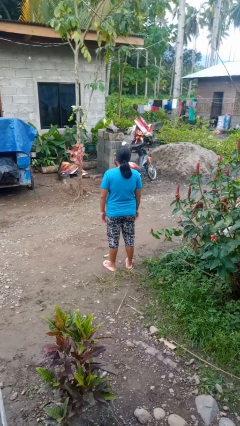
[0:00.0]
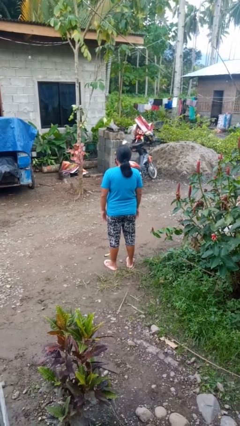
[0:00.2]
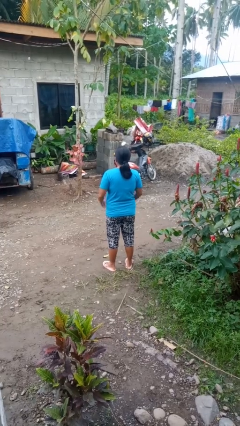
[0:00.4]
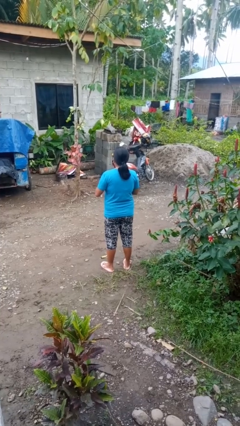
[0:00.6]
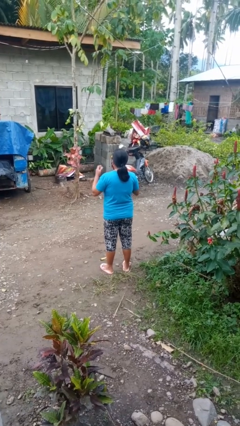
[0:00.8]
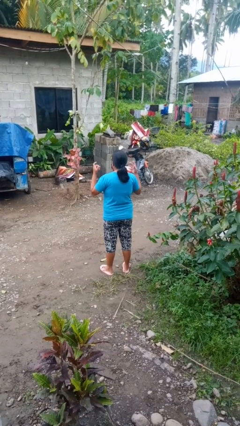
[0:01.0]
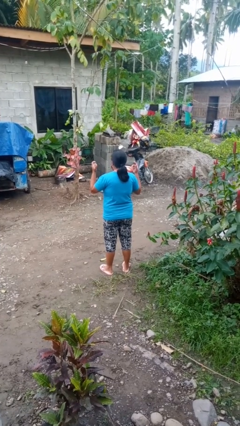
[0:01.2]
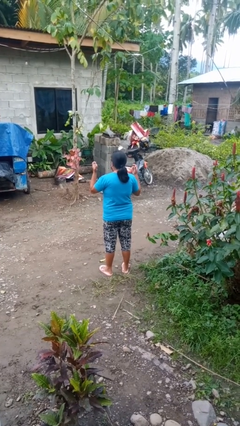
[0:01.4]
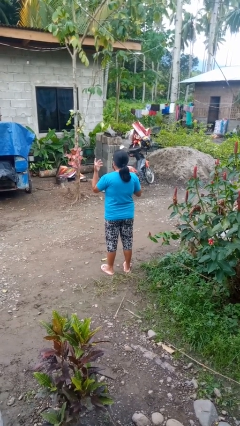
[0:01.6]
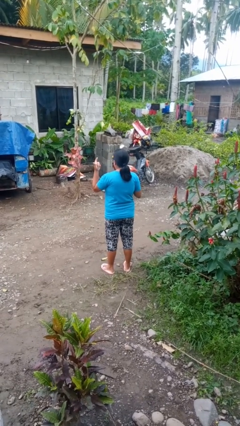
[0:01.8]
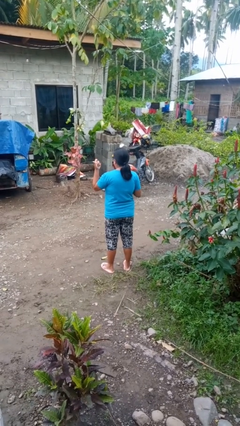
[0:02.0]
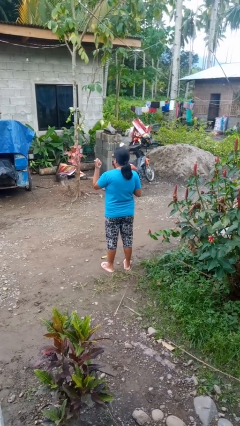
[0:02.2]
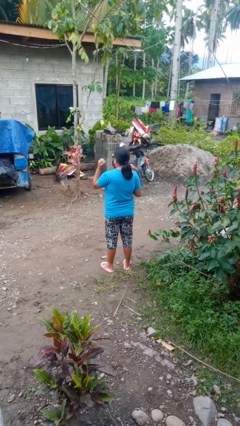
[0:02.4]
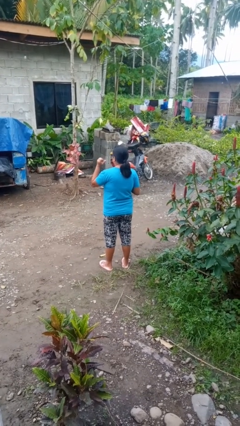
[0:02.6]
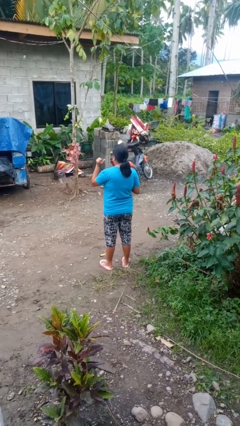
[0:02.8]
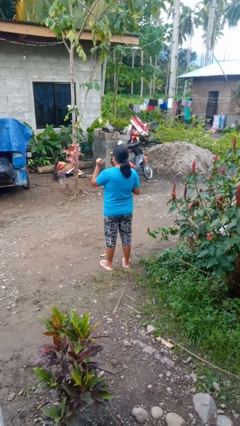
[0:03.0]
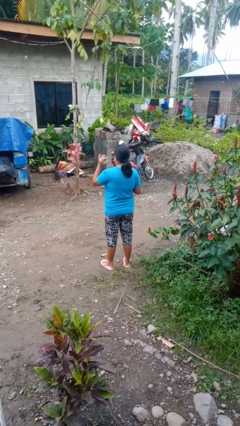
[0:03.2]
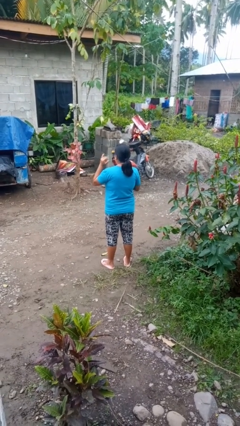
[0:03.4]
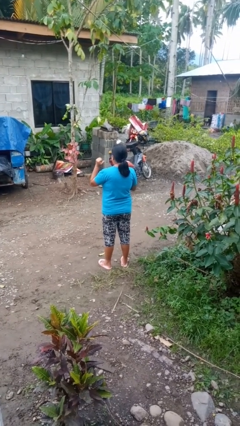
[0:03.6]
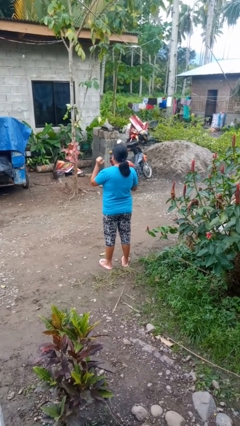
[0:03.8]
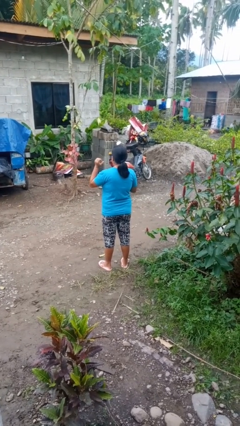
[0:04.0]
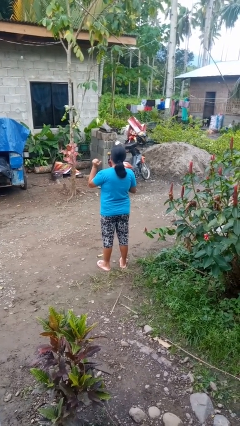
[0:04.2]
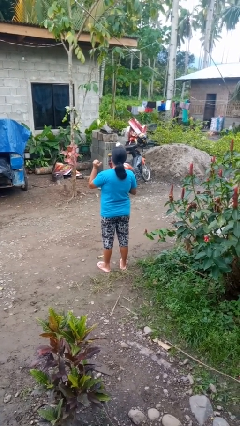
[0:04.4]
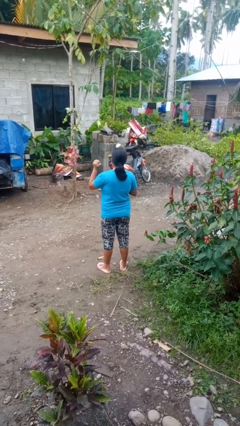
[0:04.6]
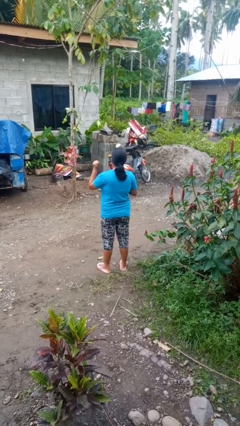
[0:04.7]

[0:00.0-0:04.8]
person cracks knuckles

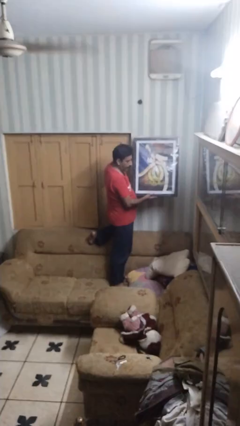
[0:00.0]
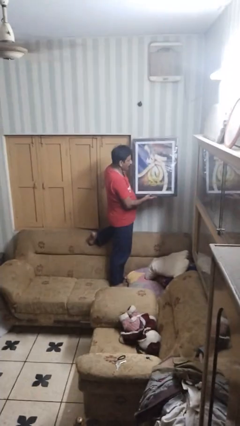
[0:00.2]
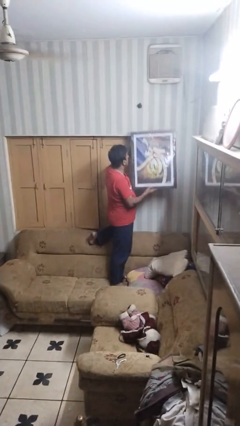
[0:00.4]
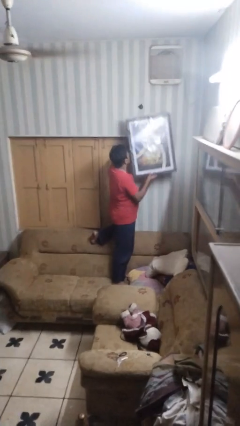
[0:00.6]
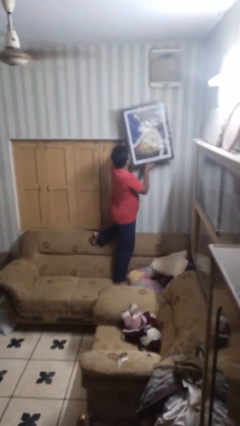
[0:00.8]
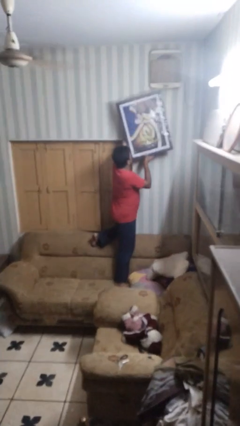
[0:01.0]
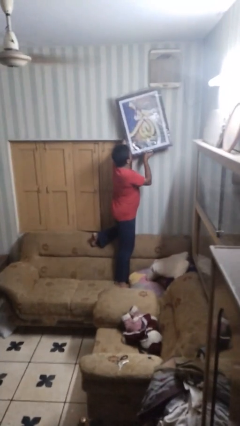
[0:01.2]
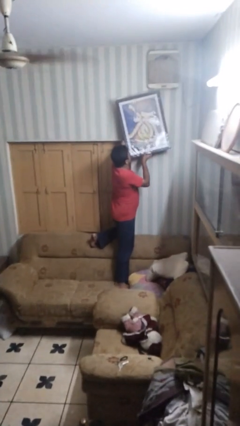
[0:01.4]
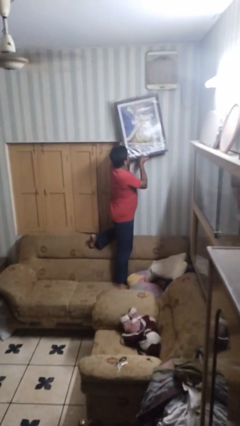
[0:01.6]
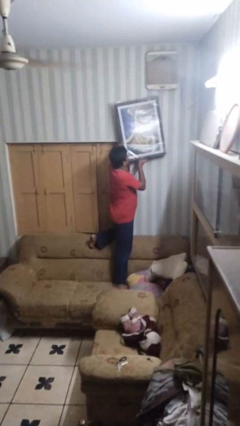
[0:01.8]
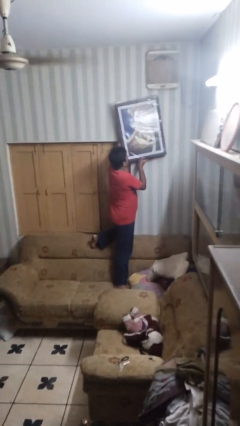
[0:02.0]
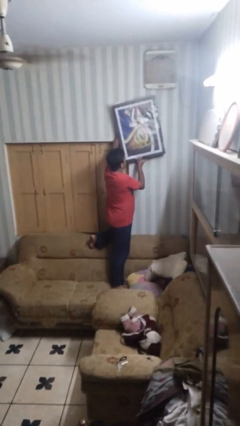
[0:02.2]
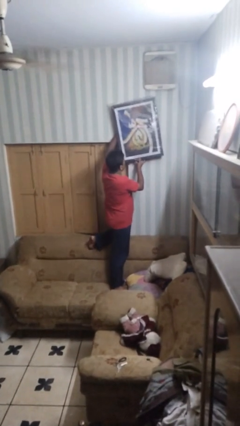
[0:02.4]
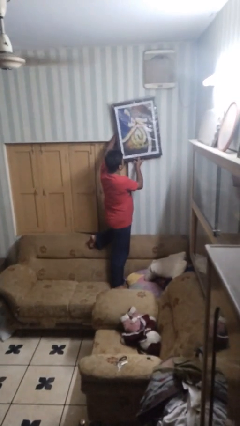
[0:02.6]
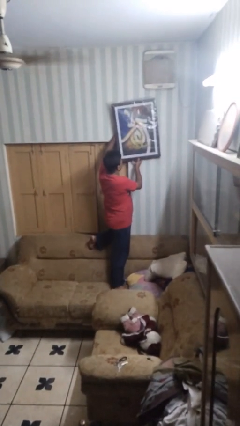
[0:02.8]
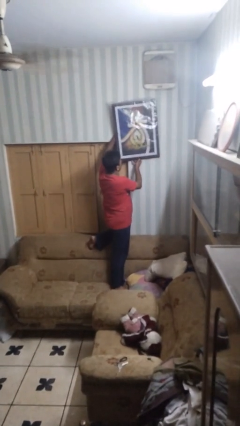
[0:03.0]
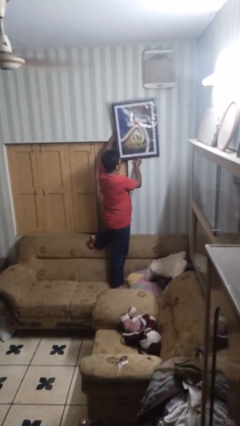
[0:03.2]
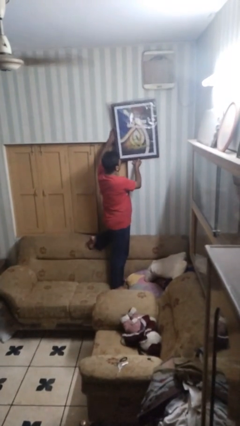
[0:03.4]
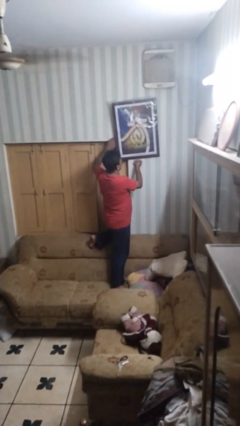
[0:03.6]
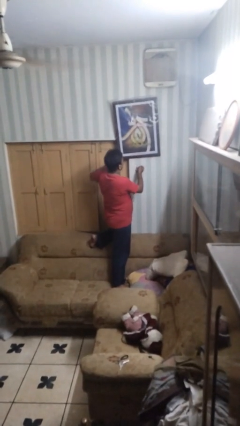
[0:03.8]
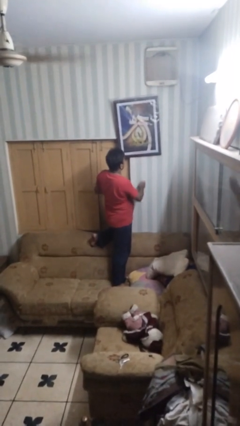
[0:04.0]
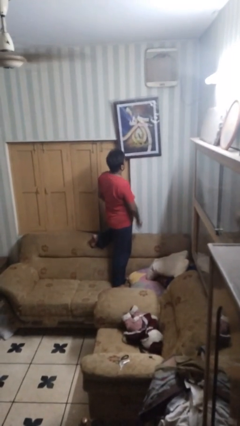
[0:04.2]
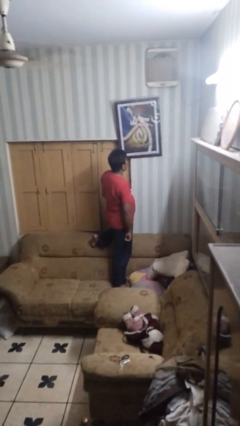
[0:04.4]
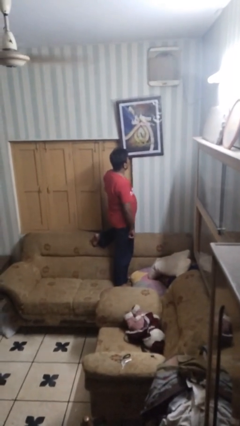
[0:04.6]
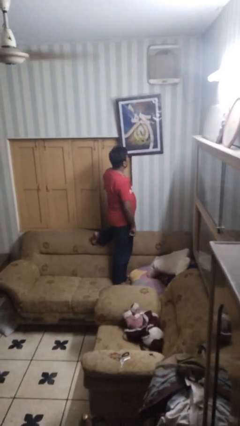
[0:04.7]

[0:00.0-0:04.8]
person puts up picture frame

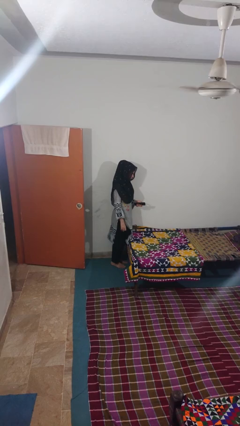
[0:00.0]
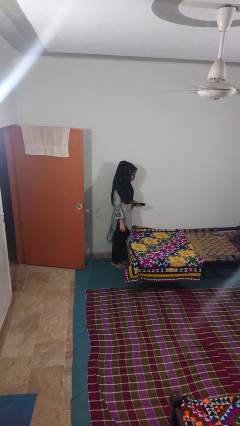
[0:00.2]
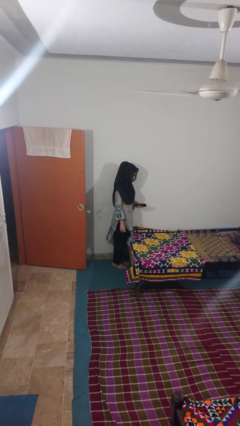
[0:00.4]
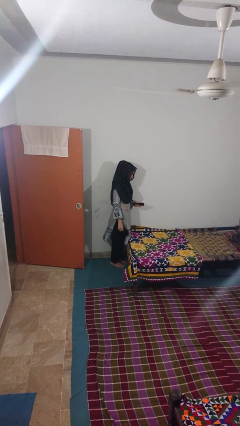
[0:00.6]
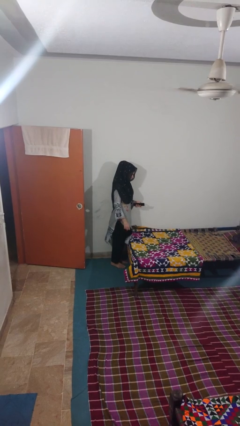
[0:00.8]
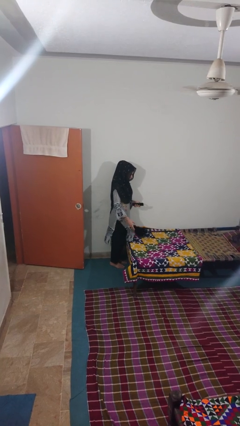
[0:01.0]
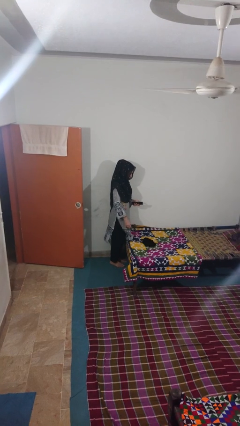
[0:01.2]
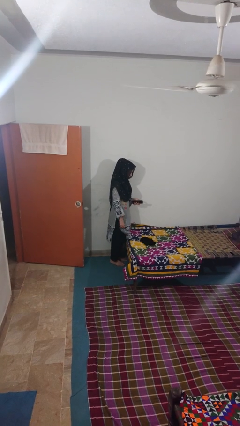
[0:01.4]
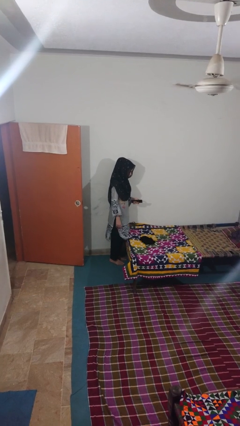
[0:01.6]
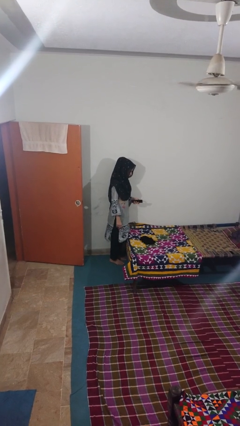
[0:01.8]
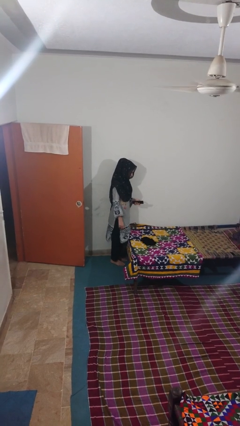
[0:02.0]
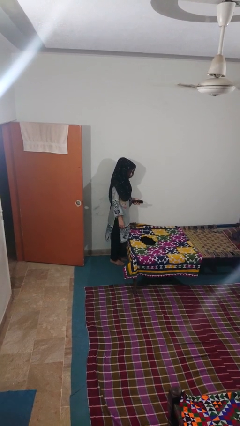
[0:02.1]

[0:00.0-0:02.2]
person throws object on bed

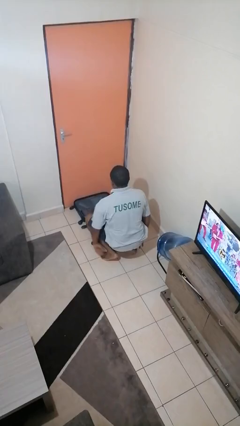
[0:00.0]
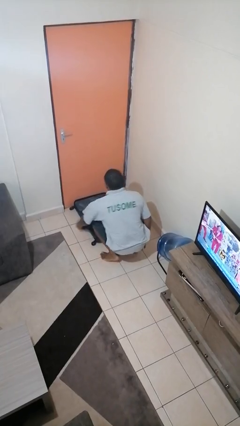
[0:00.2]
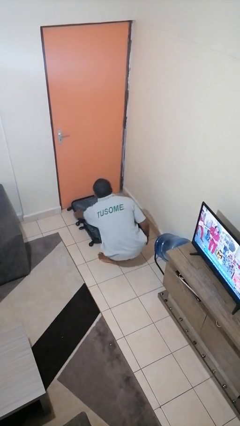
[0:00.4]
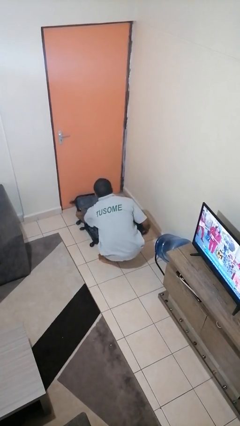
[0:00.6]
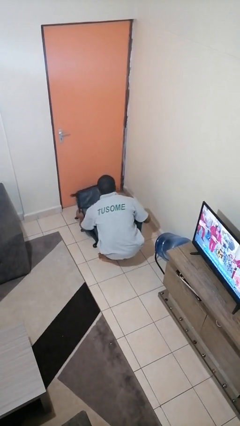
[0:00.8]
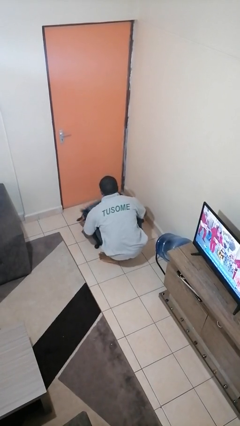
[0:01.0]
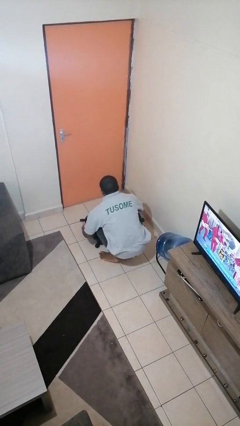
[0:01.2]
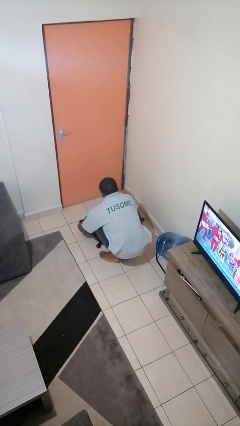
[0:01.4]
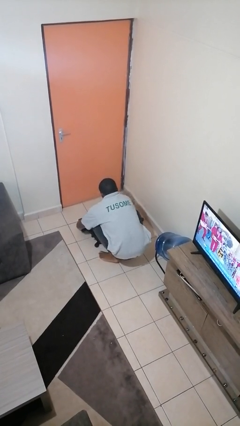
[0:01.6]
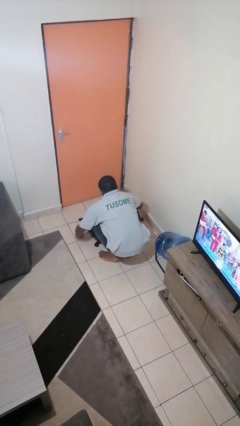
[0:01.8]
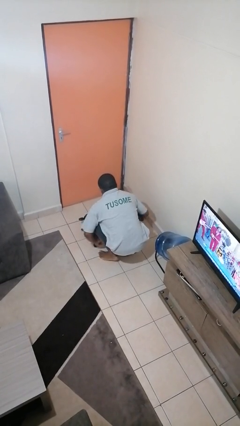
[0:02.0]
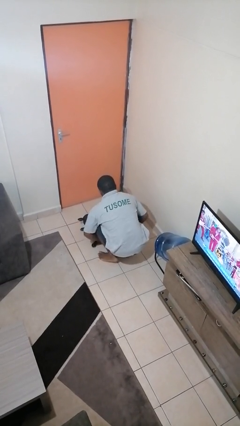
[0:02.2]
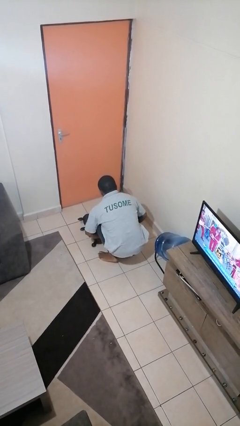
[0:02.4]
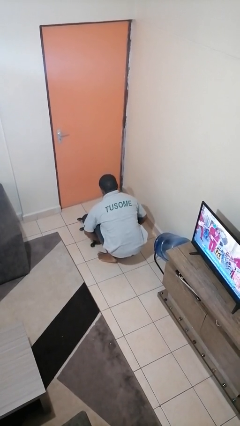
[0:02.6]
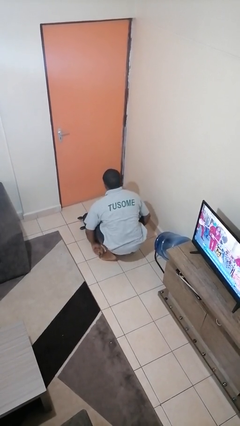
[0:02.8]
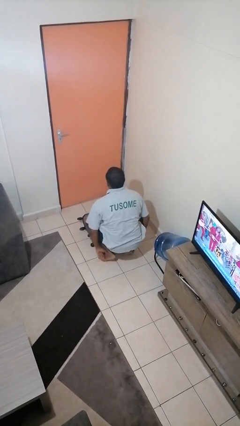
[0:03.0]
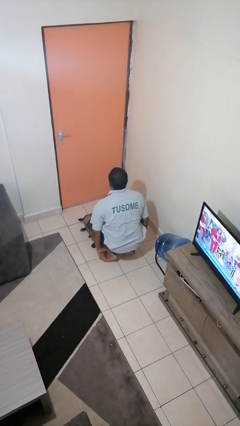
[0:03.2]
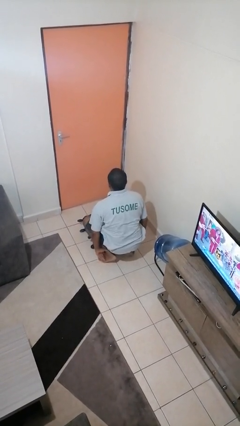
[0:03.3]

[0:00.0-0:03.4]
person closes suitcase

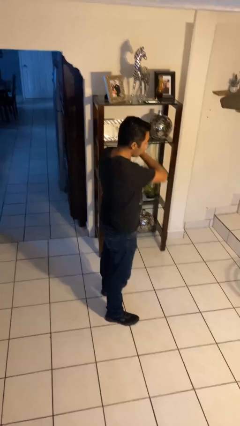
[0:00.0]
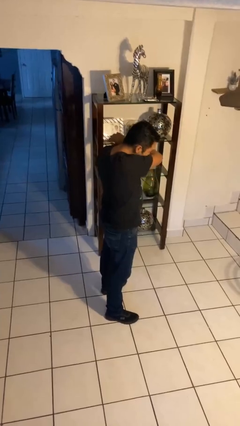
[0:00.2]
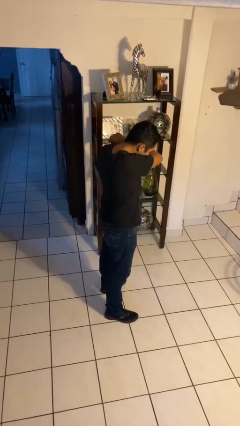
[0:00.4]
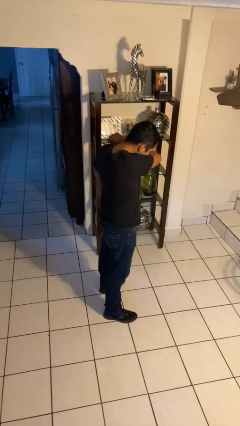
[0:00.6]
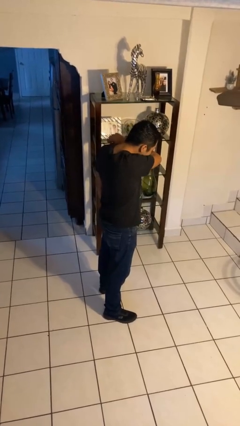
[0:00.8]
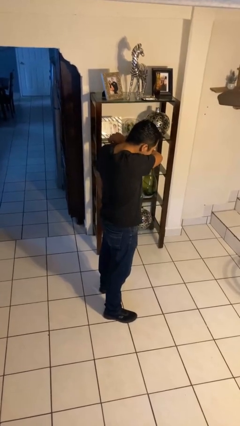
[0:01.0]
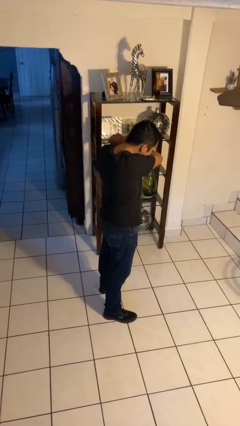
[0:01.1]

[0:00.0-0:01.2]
person sneezes into arm

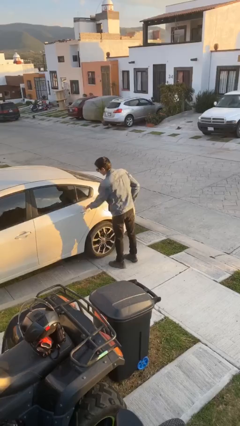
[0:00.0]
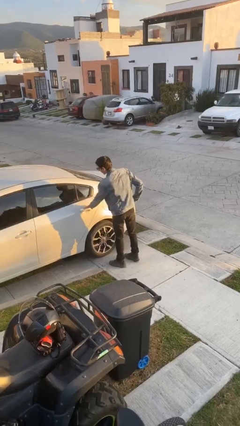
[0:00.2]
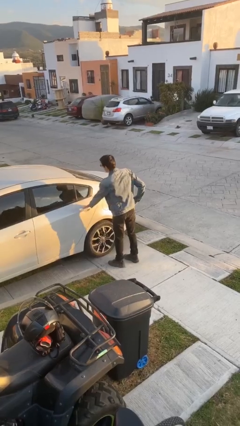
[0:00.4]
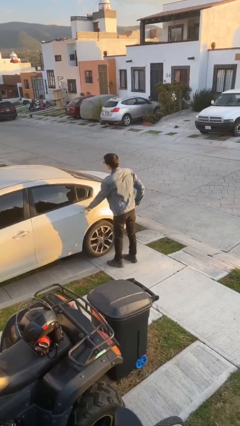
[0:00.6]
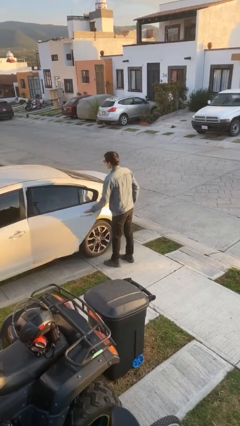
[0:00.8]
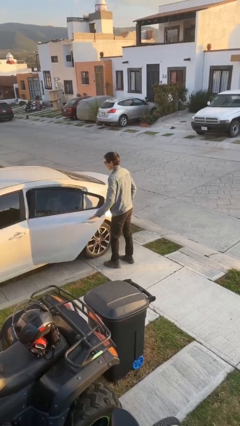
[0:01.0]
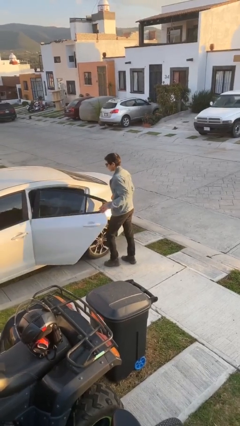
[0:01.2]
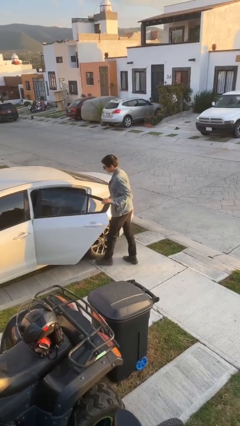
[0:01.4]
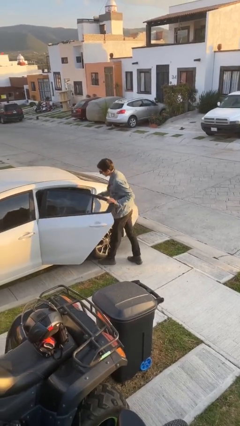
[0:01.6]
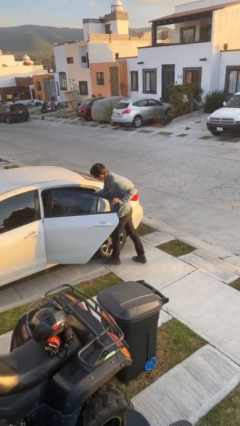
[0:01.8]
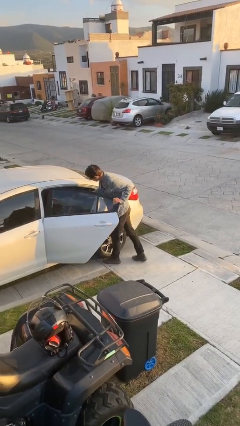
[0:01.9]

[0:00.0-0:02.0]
person opens car door
